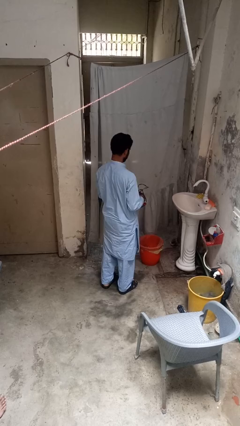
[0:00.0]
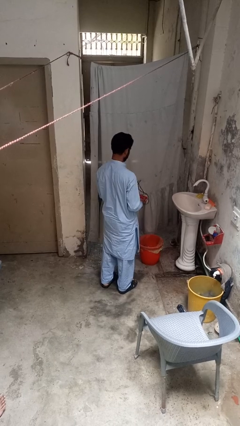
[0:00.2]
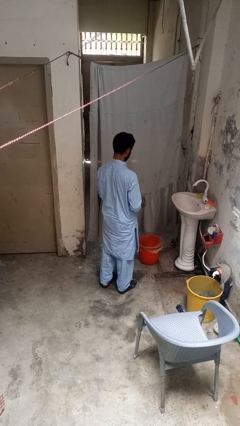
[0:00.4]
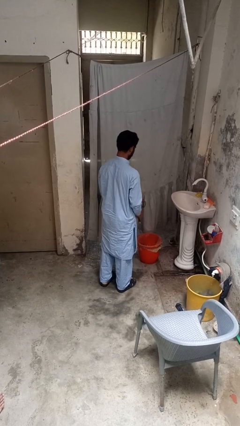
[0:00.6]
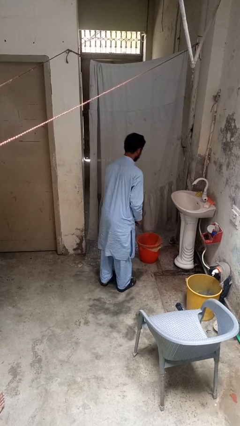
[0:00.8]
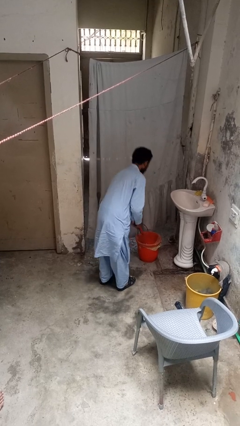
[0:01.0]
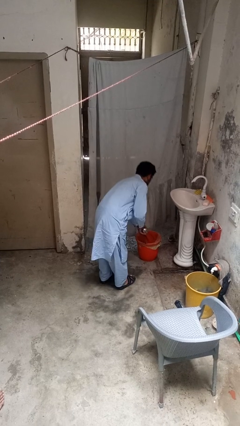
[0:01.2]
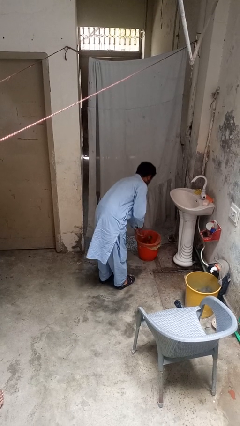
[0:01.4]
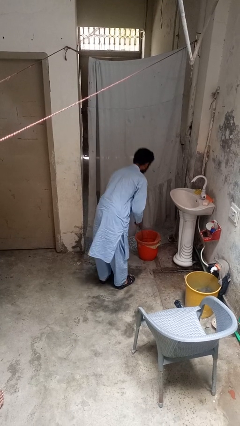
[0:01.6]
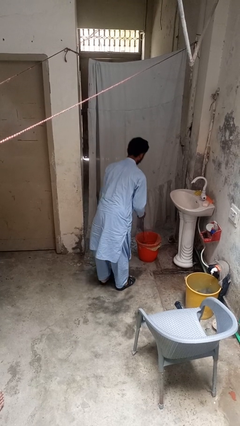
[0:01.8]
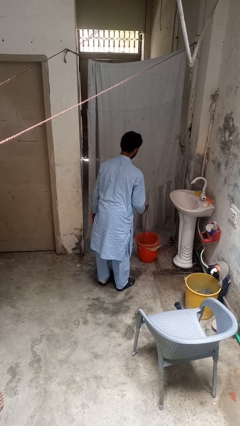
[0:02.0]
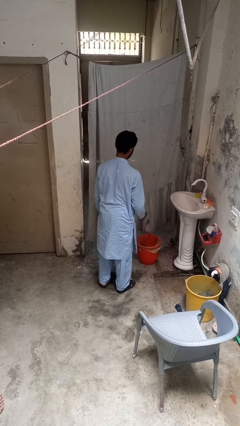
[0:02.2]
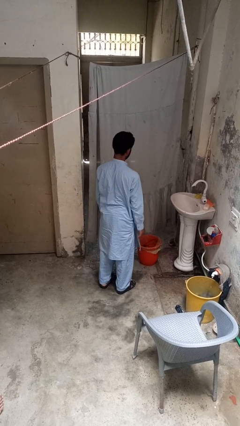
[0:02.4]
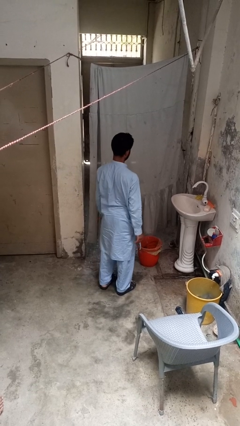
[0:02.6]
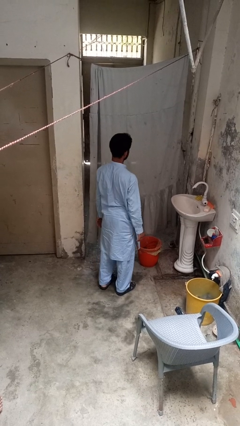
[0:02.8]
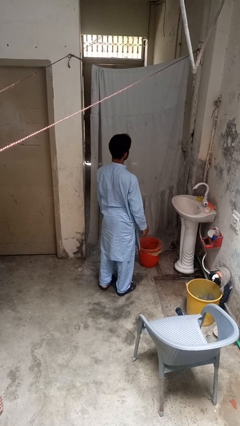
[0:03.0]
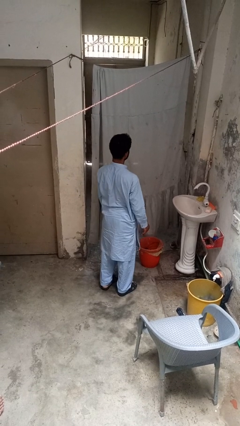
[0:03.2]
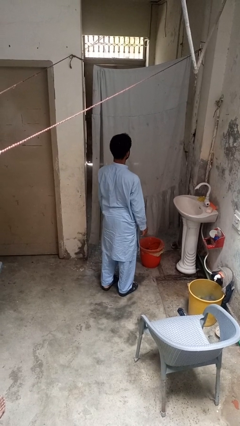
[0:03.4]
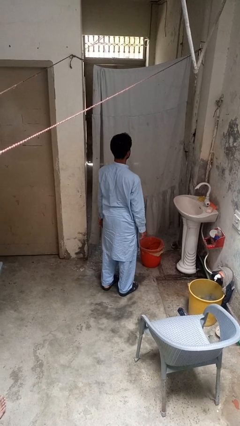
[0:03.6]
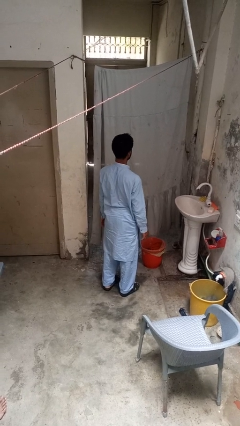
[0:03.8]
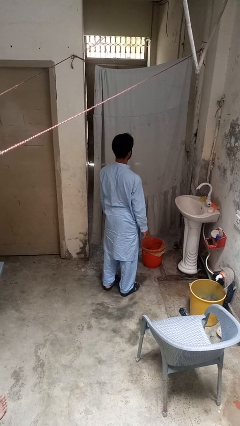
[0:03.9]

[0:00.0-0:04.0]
person discards trash

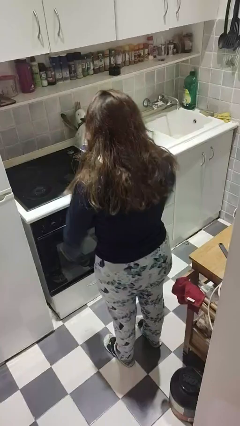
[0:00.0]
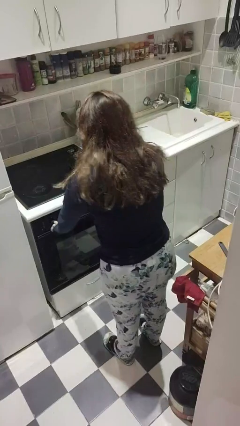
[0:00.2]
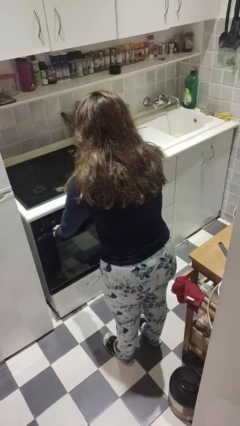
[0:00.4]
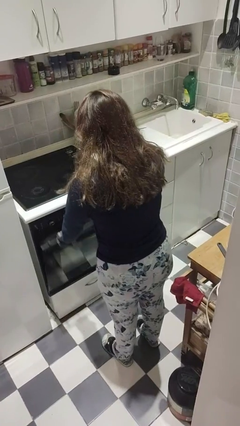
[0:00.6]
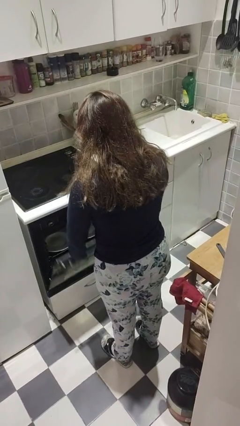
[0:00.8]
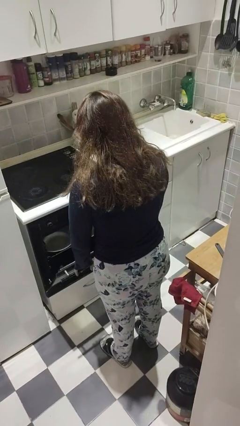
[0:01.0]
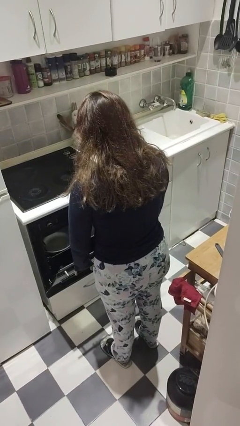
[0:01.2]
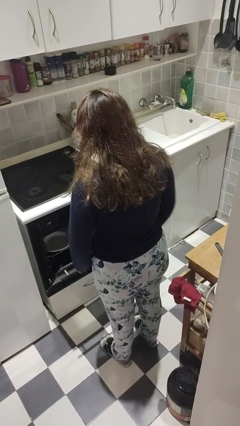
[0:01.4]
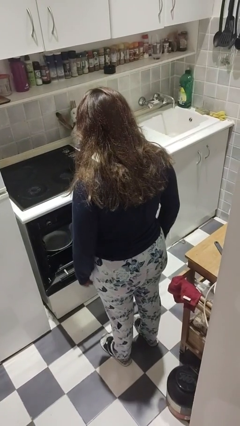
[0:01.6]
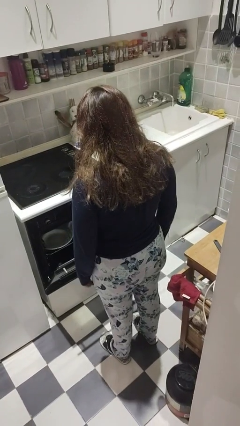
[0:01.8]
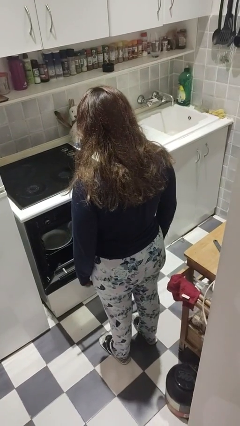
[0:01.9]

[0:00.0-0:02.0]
person opens dishwasher

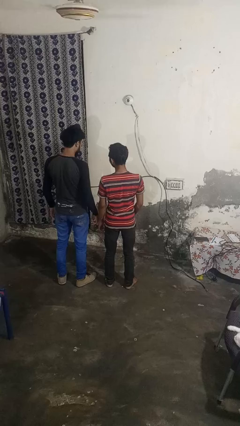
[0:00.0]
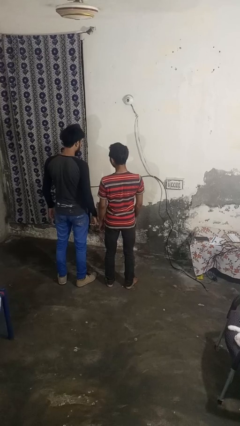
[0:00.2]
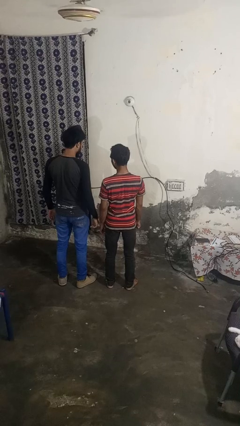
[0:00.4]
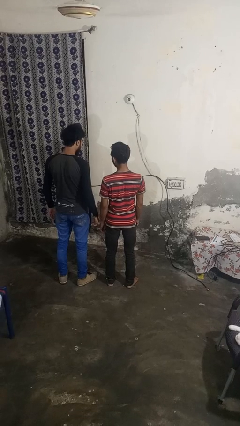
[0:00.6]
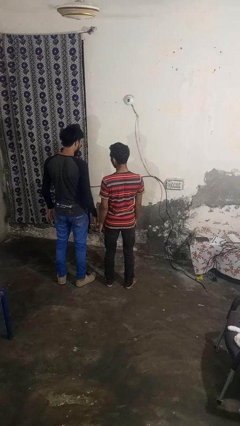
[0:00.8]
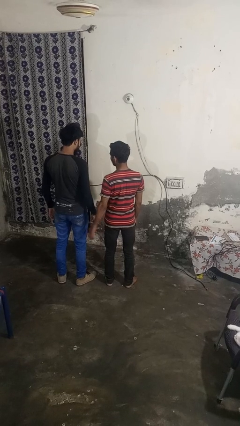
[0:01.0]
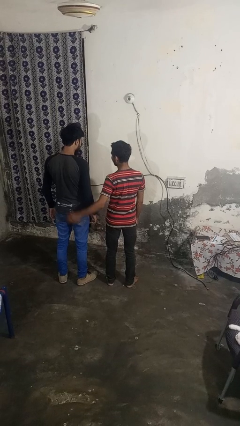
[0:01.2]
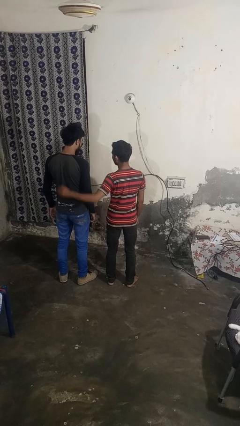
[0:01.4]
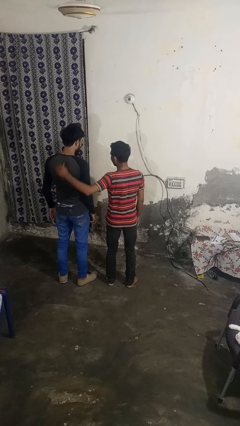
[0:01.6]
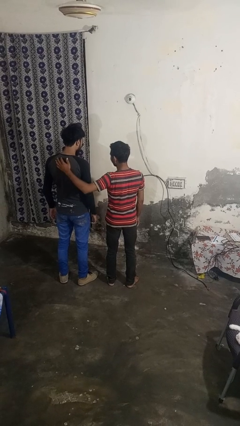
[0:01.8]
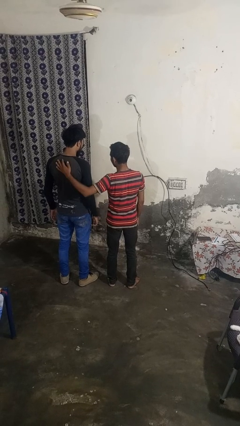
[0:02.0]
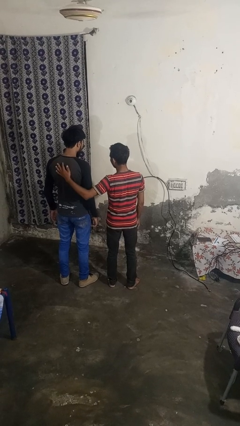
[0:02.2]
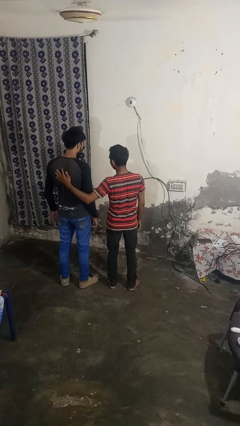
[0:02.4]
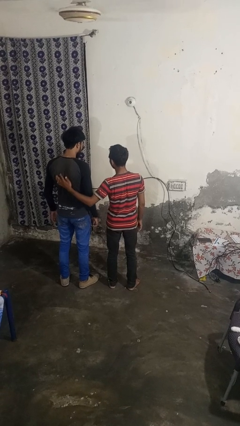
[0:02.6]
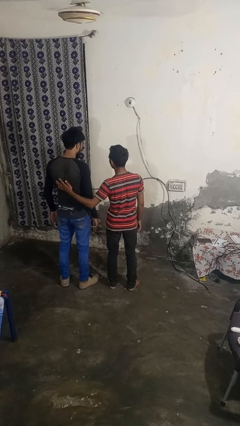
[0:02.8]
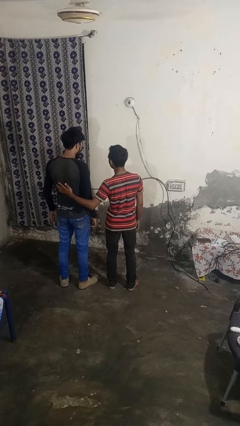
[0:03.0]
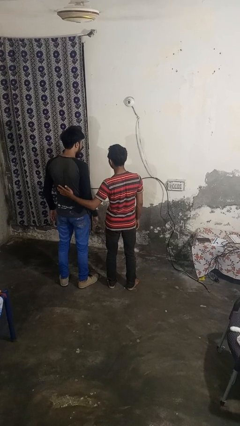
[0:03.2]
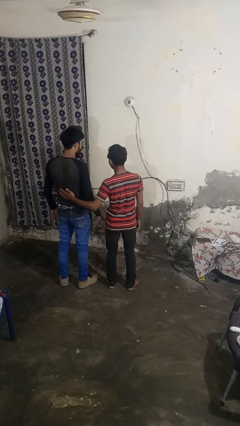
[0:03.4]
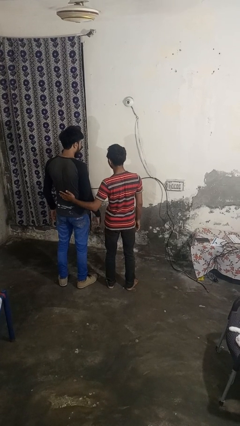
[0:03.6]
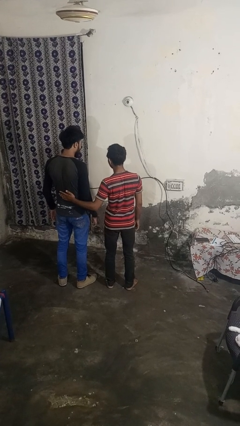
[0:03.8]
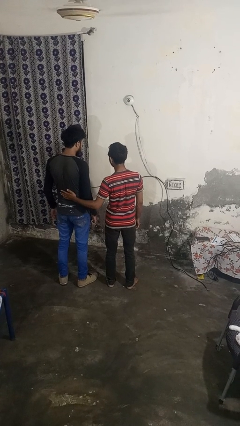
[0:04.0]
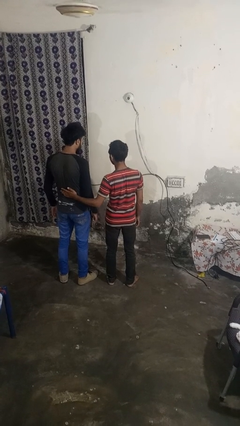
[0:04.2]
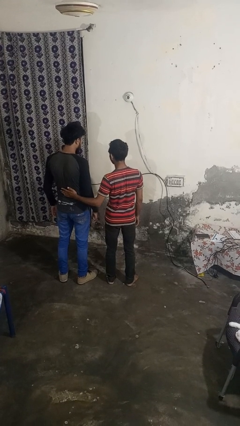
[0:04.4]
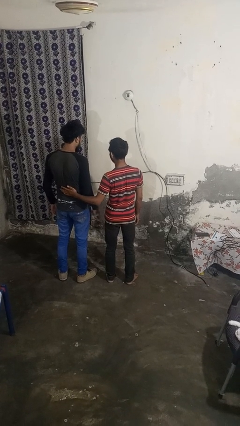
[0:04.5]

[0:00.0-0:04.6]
person touches back of person

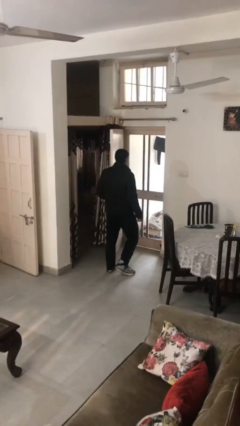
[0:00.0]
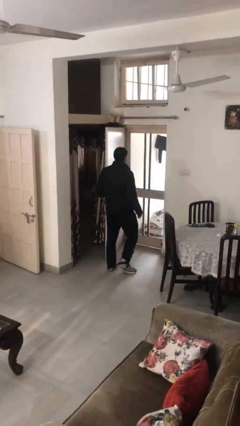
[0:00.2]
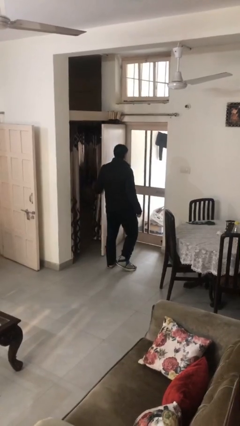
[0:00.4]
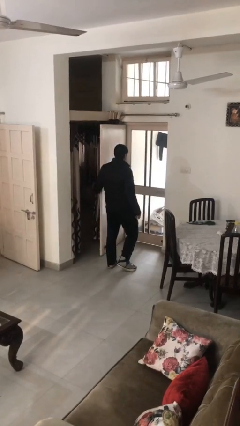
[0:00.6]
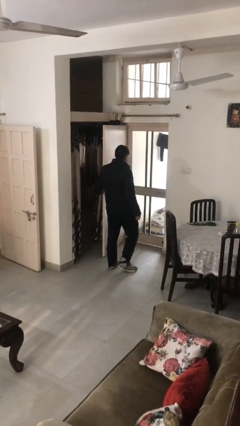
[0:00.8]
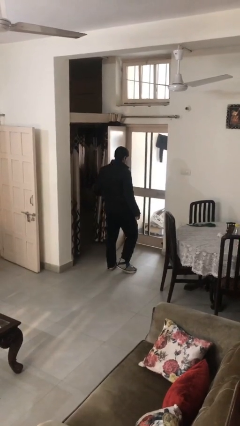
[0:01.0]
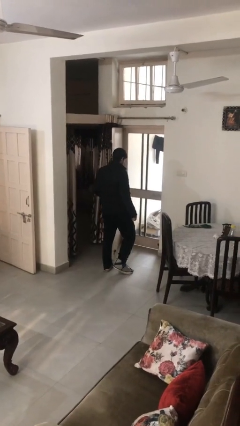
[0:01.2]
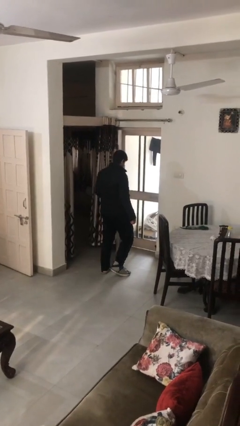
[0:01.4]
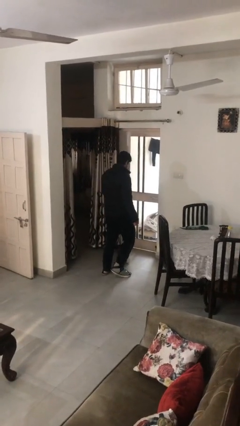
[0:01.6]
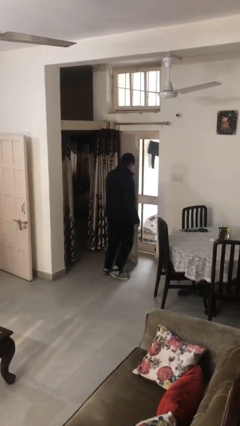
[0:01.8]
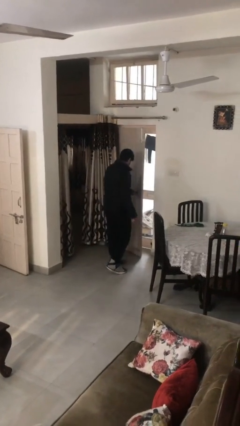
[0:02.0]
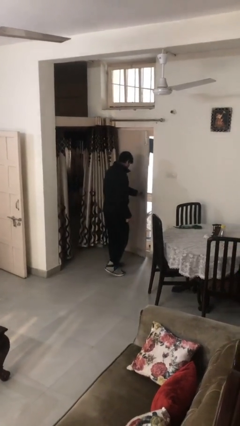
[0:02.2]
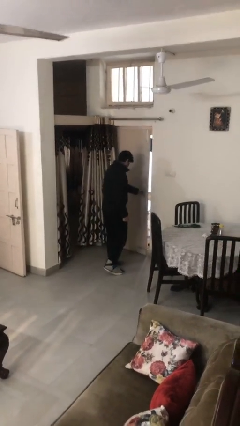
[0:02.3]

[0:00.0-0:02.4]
person closes facility door

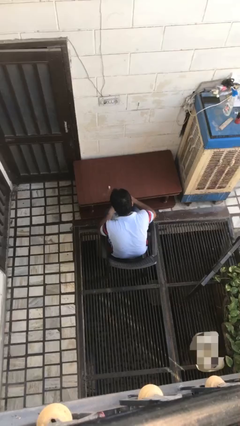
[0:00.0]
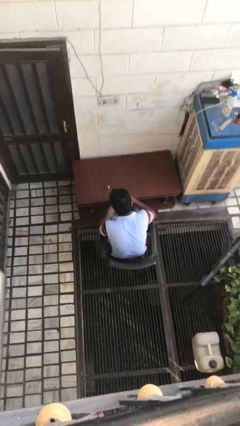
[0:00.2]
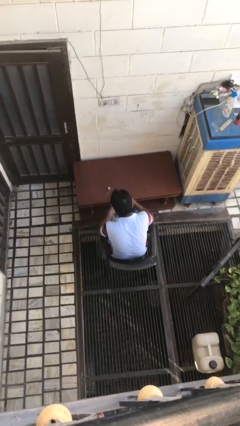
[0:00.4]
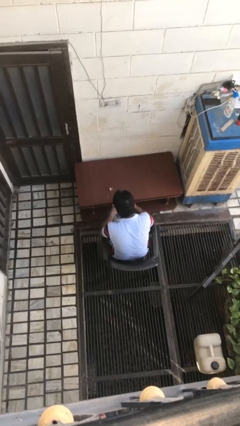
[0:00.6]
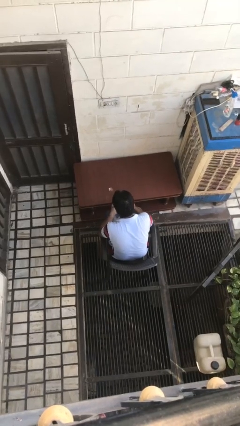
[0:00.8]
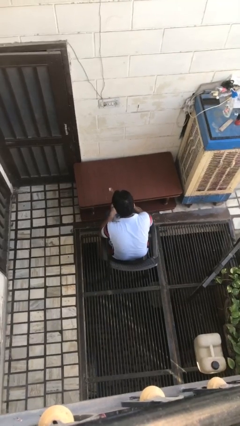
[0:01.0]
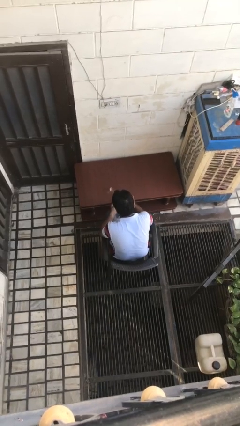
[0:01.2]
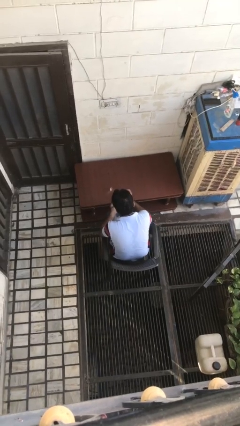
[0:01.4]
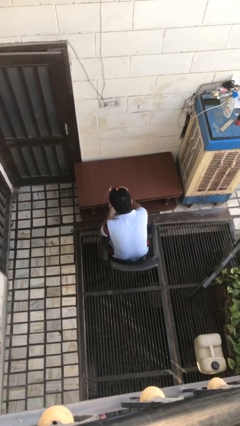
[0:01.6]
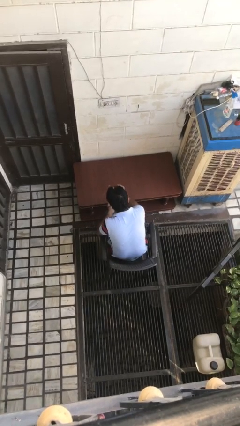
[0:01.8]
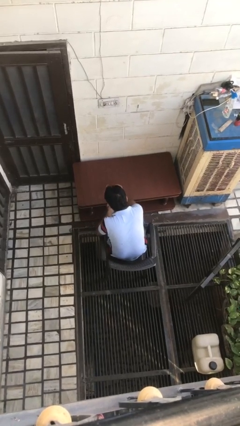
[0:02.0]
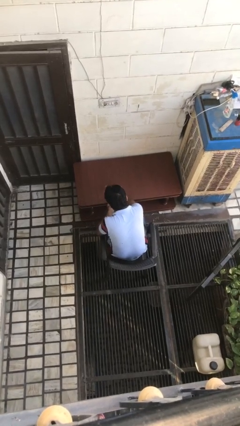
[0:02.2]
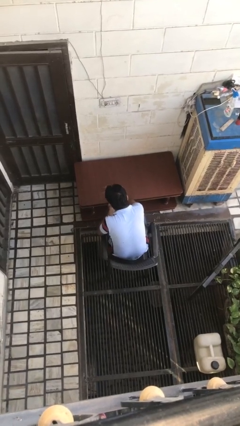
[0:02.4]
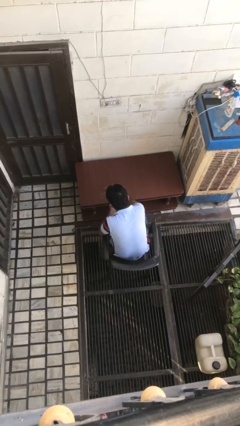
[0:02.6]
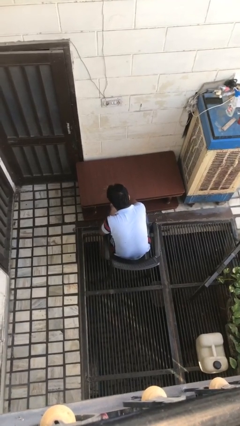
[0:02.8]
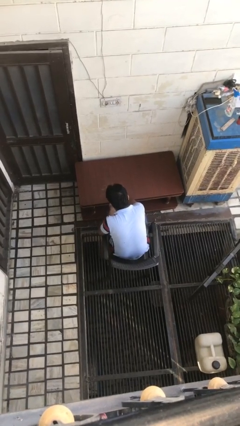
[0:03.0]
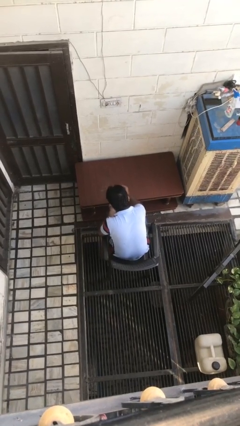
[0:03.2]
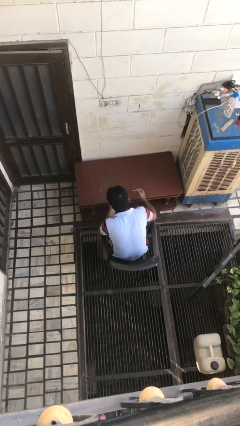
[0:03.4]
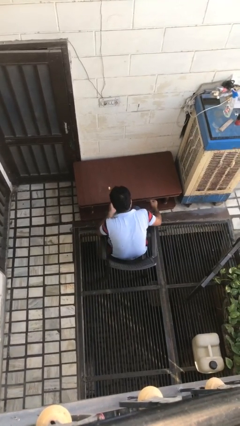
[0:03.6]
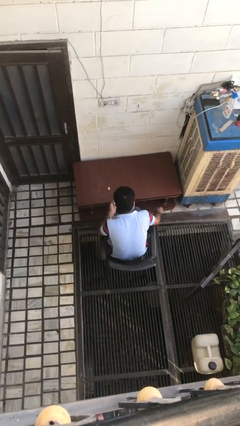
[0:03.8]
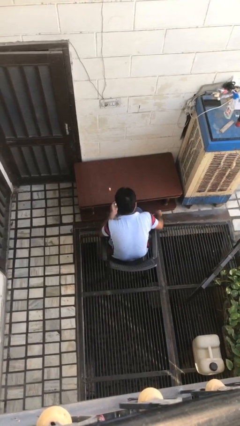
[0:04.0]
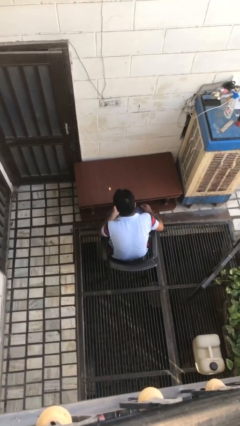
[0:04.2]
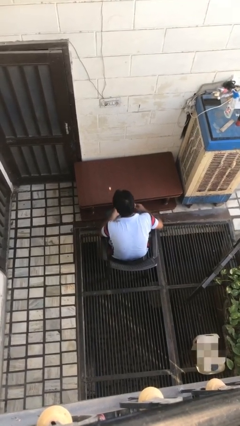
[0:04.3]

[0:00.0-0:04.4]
person lights candle
